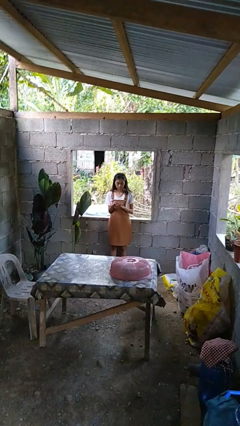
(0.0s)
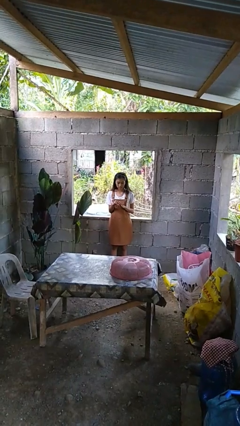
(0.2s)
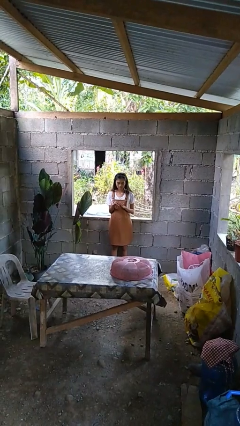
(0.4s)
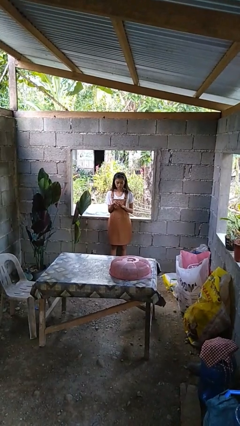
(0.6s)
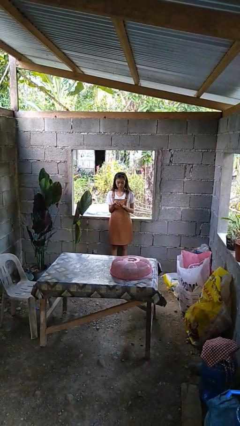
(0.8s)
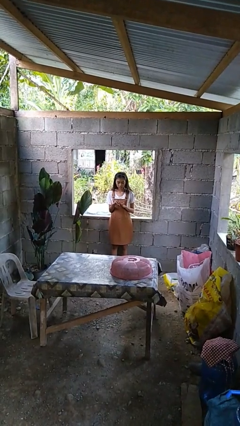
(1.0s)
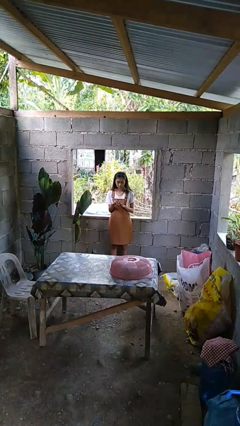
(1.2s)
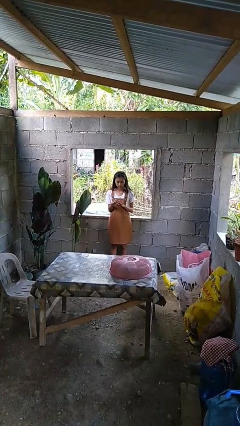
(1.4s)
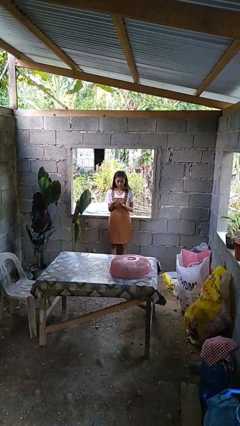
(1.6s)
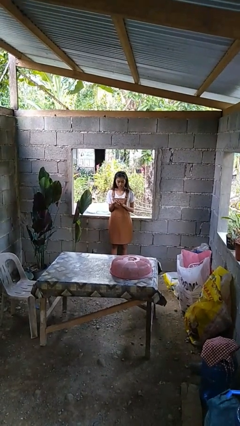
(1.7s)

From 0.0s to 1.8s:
person clips fingernails

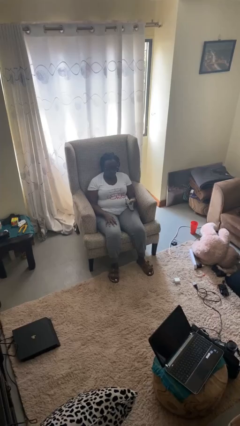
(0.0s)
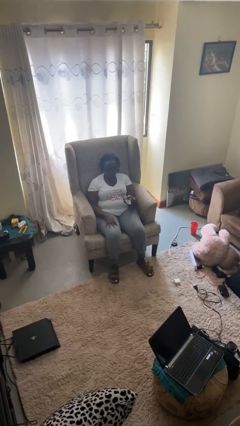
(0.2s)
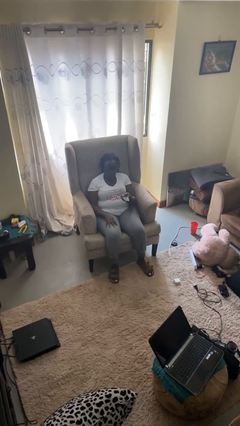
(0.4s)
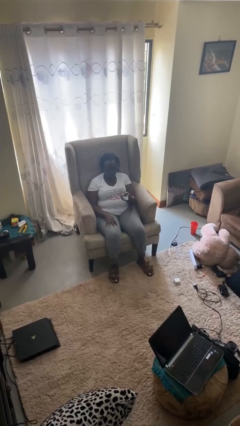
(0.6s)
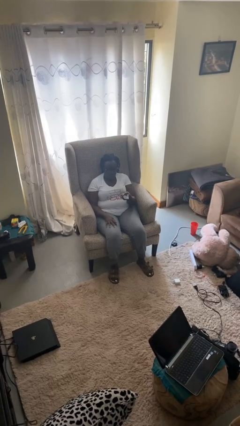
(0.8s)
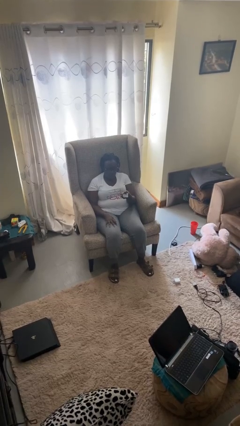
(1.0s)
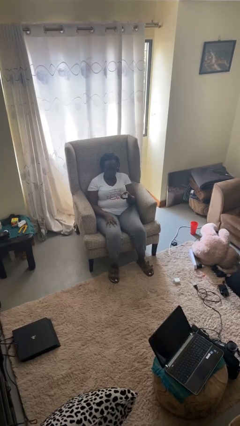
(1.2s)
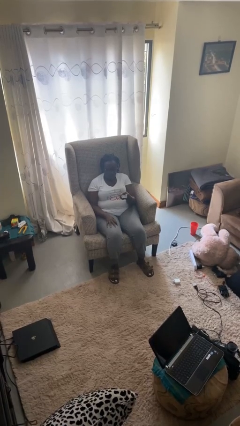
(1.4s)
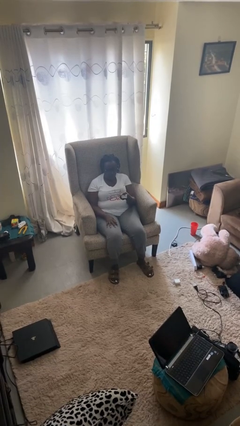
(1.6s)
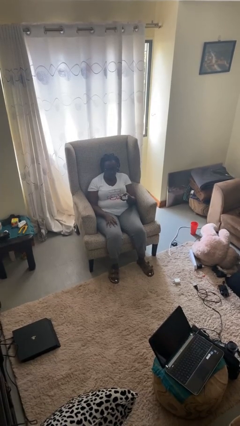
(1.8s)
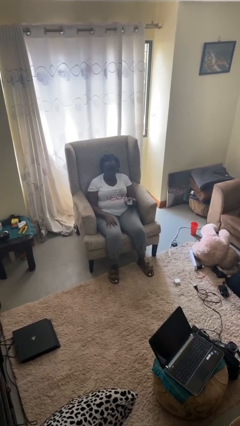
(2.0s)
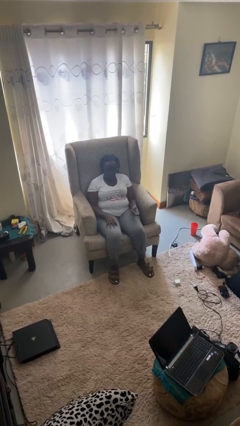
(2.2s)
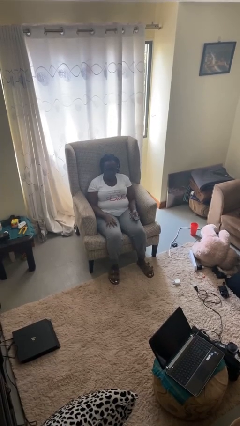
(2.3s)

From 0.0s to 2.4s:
person uses television remote

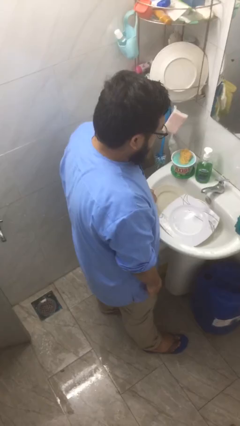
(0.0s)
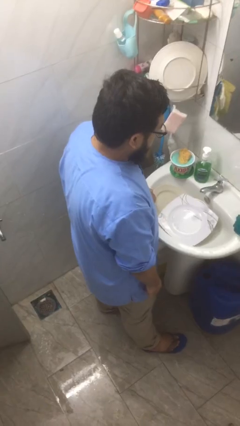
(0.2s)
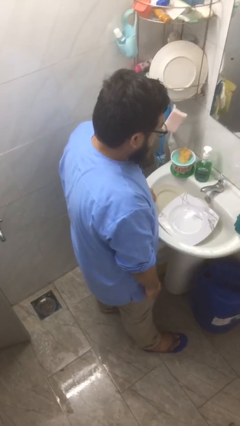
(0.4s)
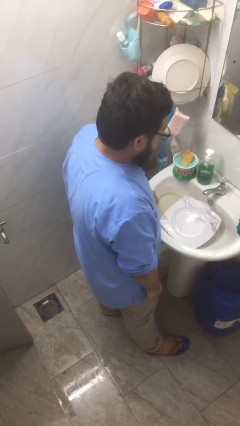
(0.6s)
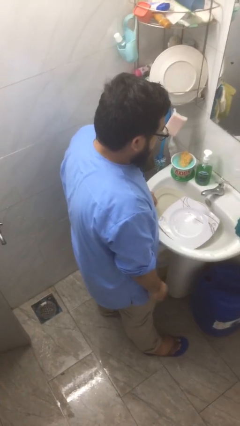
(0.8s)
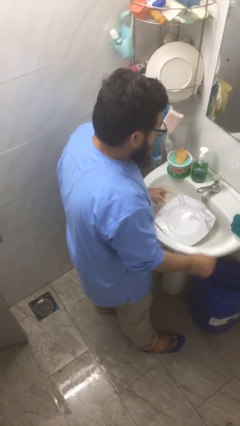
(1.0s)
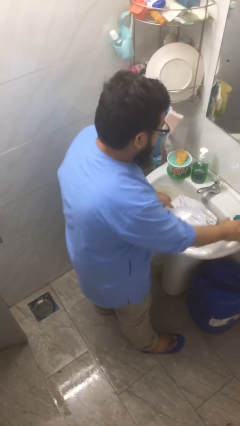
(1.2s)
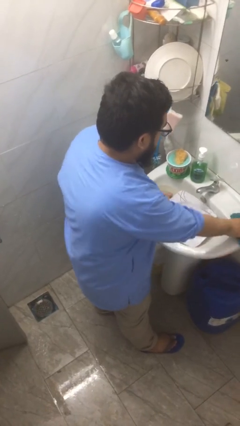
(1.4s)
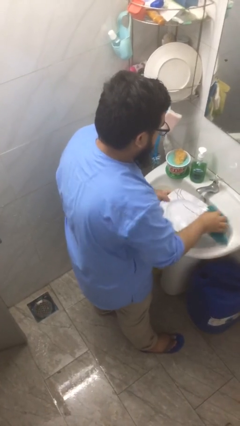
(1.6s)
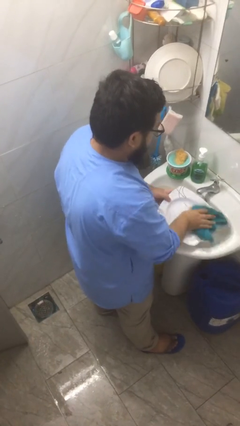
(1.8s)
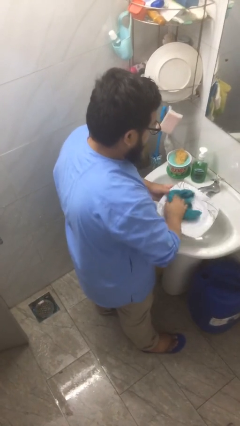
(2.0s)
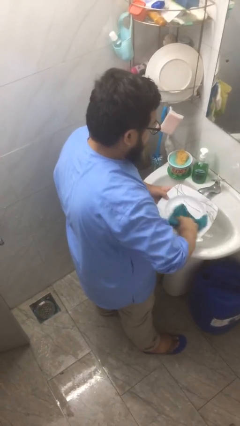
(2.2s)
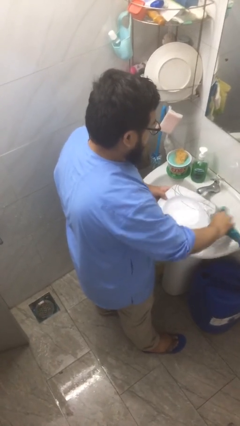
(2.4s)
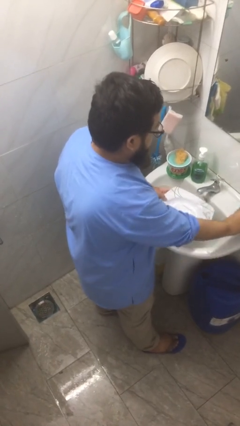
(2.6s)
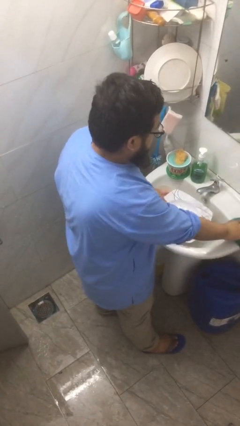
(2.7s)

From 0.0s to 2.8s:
person dries dish

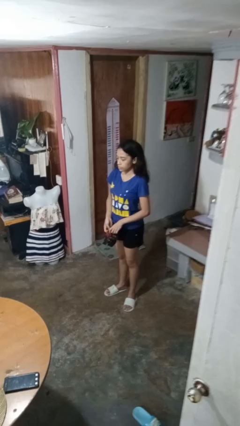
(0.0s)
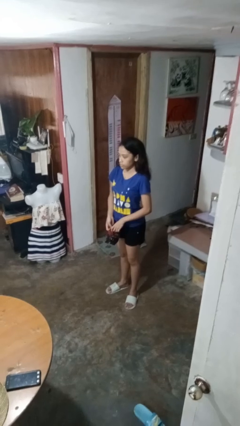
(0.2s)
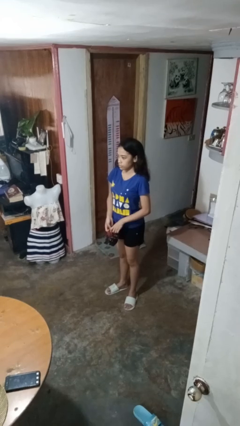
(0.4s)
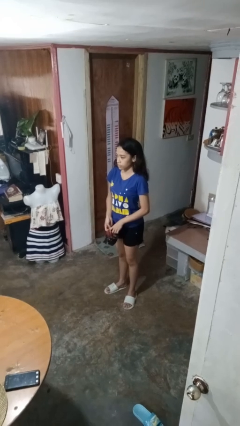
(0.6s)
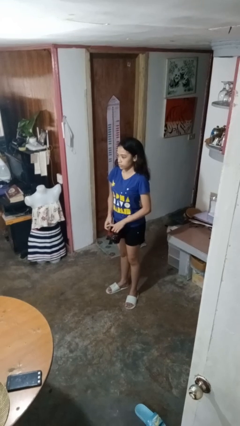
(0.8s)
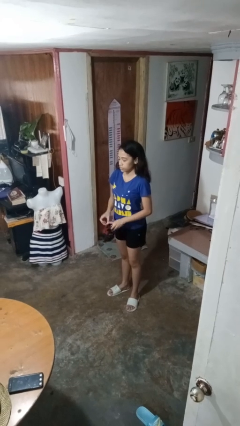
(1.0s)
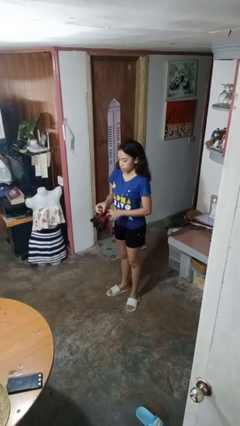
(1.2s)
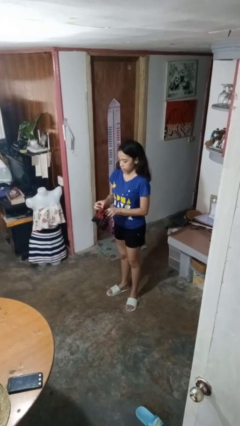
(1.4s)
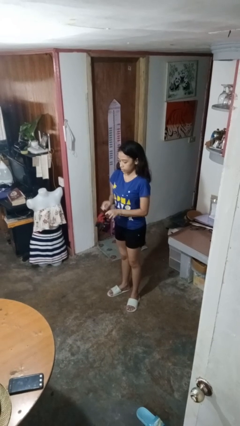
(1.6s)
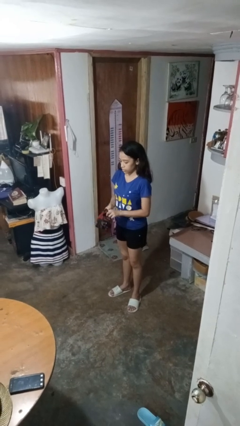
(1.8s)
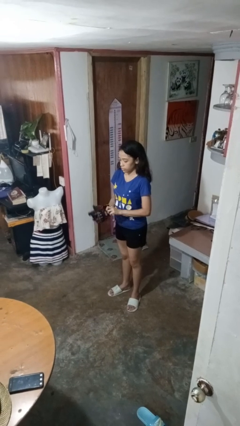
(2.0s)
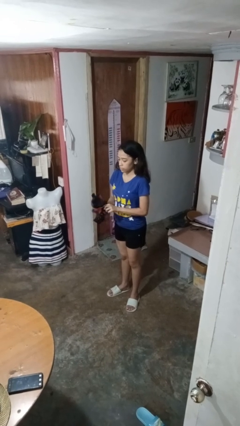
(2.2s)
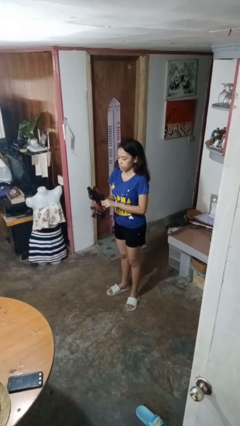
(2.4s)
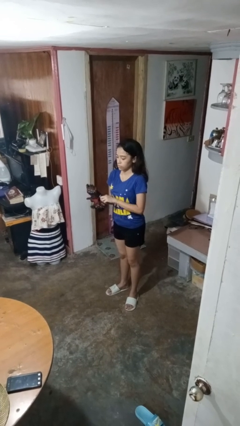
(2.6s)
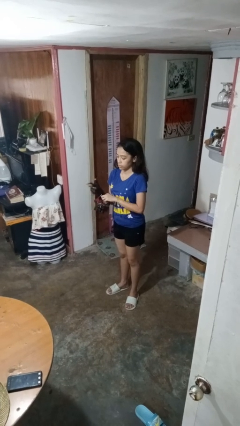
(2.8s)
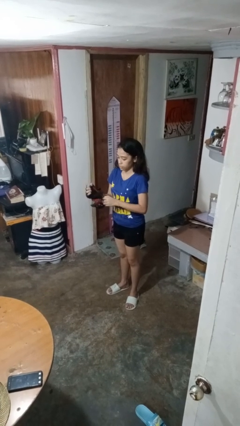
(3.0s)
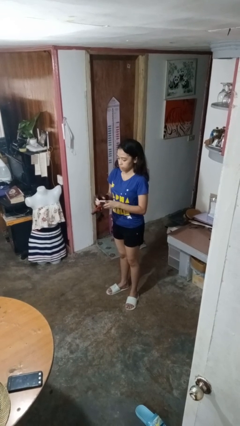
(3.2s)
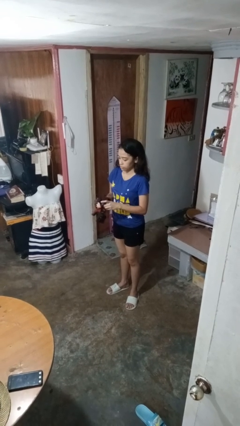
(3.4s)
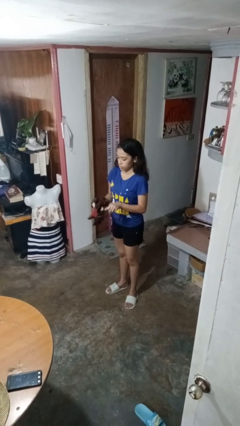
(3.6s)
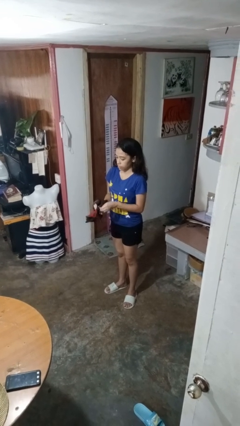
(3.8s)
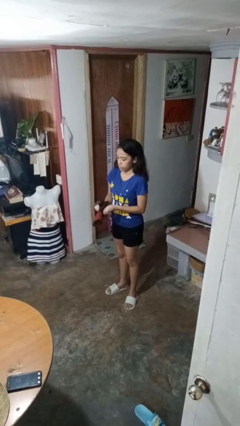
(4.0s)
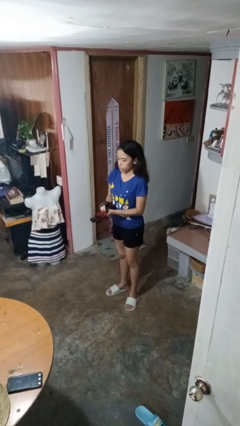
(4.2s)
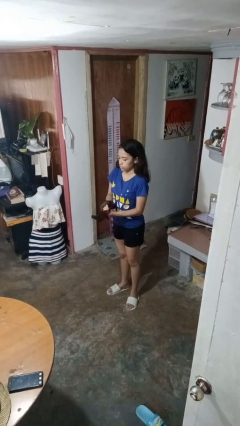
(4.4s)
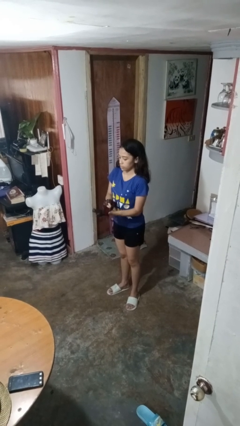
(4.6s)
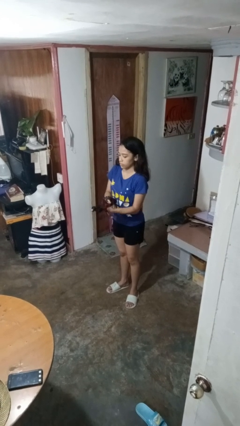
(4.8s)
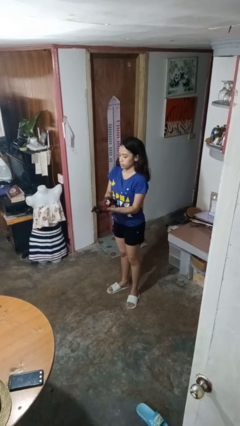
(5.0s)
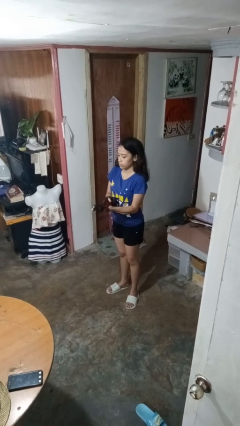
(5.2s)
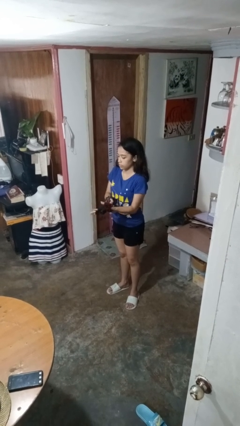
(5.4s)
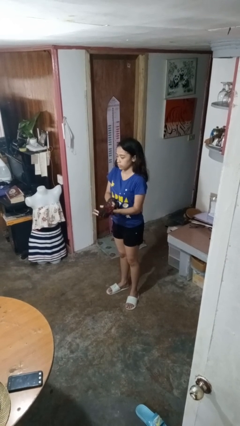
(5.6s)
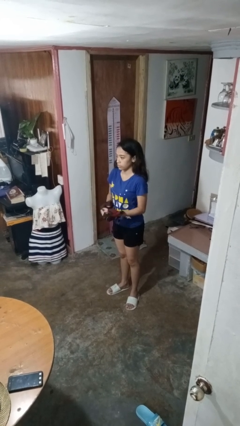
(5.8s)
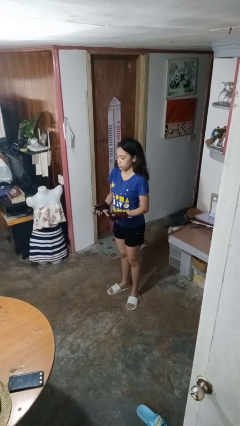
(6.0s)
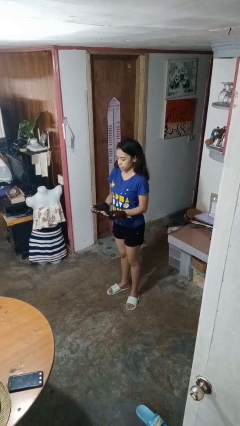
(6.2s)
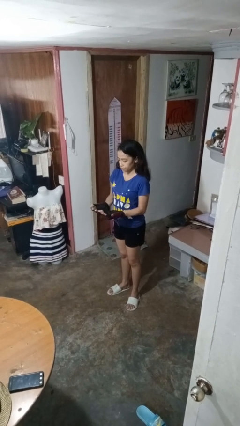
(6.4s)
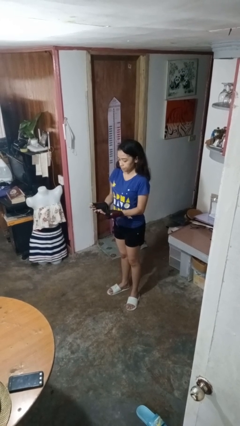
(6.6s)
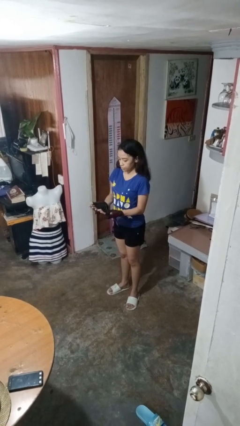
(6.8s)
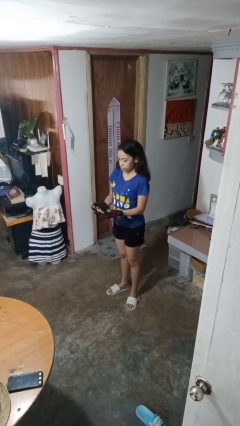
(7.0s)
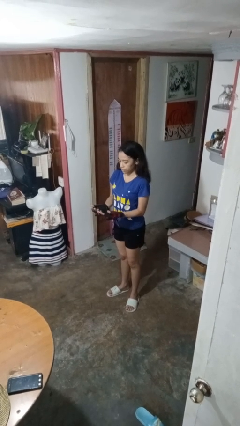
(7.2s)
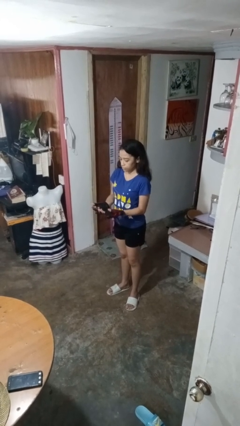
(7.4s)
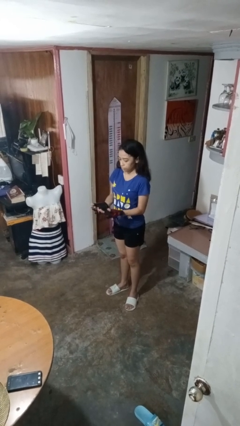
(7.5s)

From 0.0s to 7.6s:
person puts on gloves

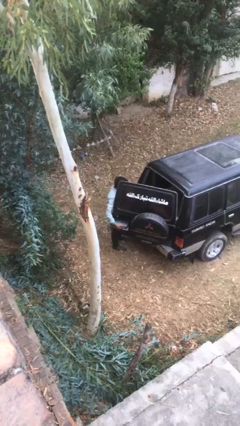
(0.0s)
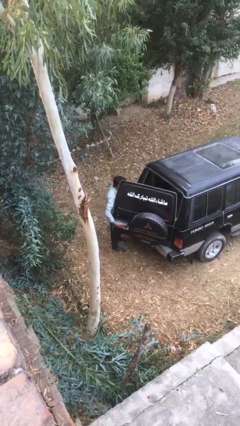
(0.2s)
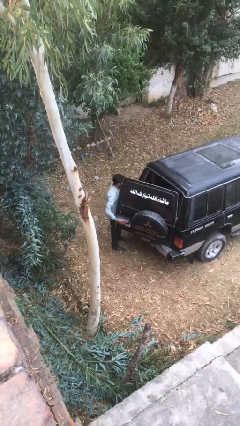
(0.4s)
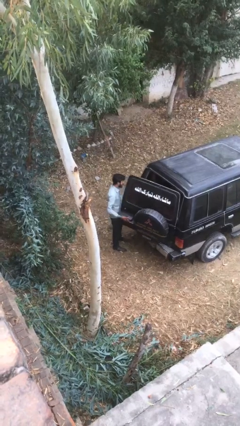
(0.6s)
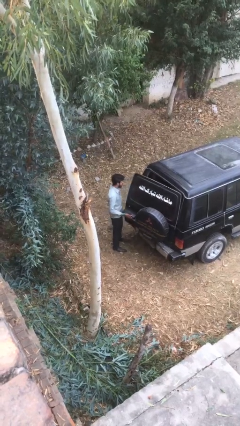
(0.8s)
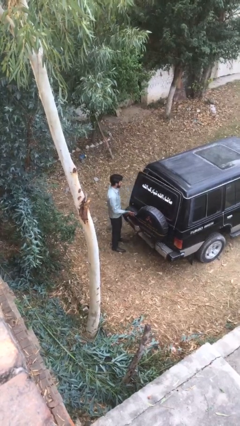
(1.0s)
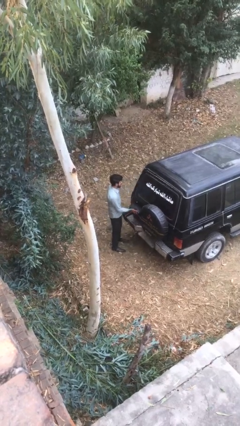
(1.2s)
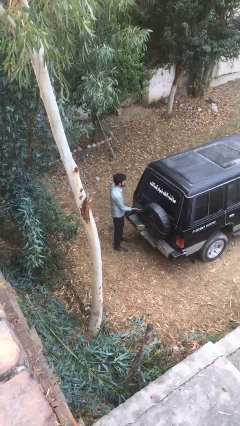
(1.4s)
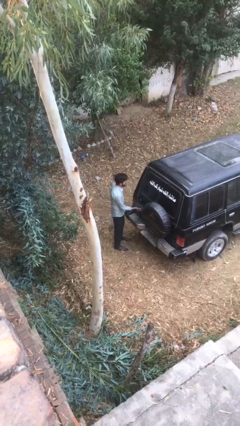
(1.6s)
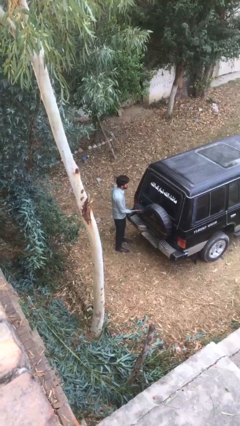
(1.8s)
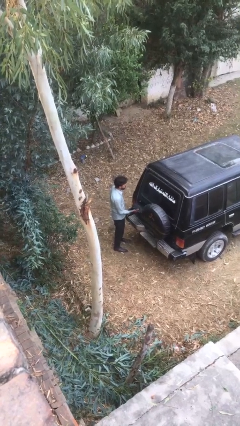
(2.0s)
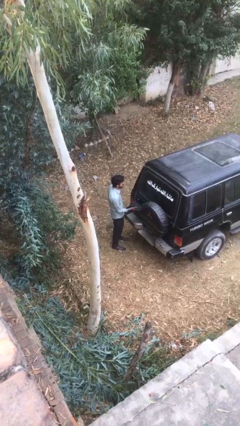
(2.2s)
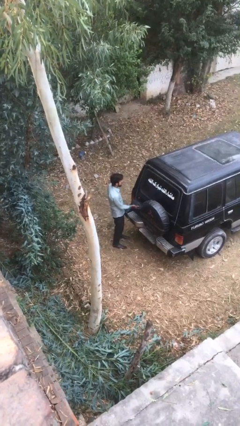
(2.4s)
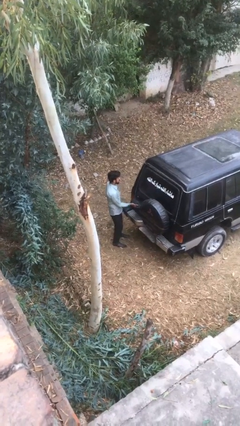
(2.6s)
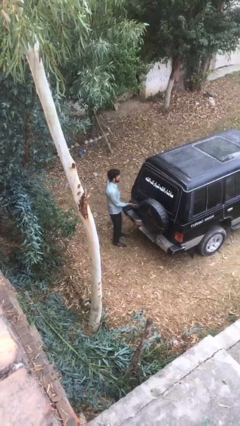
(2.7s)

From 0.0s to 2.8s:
person closes car trunk

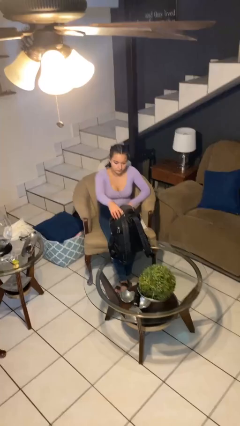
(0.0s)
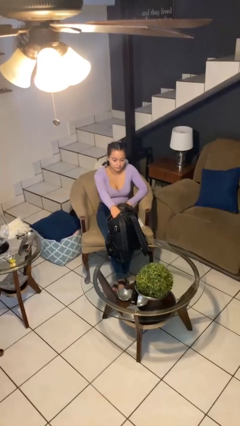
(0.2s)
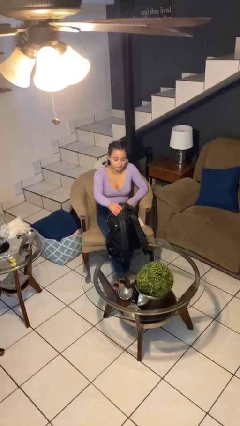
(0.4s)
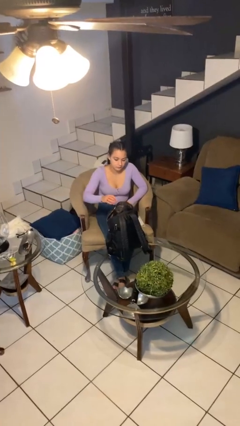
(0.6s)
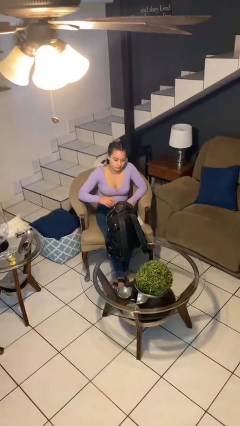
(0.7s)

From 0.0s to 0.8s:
person puts object into backpack
